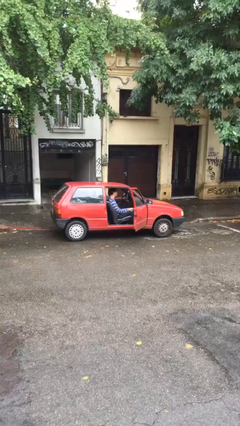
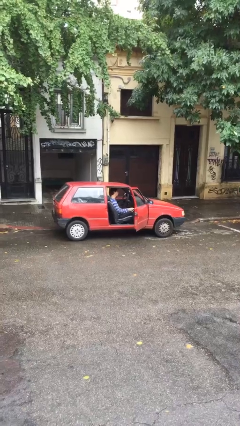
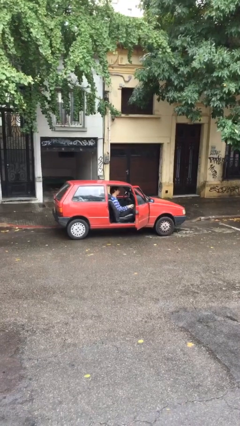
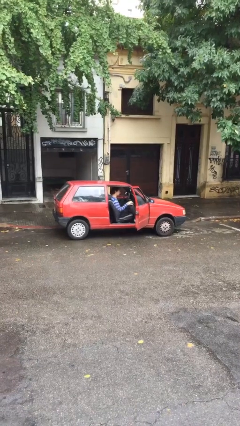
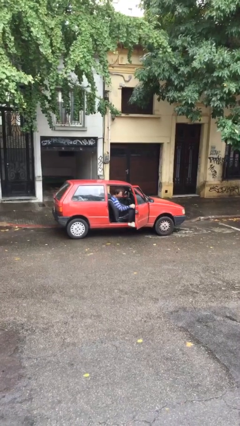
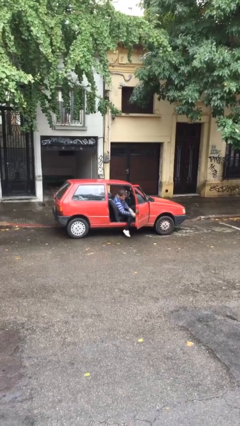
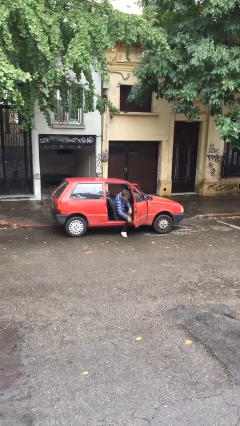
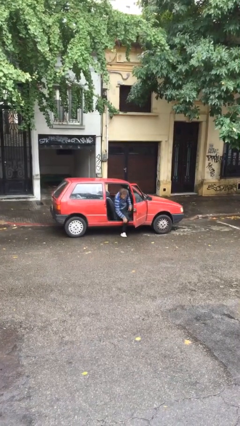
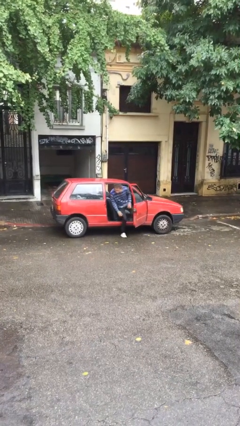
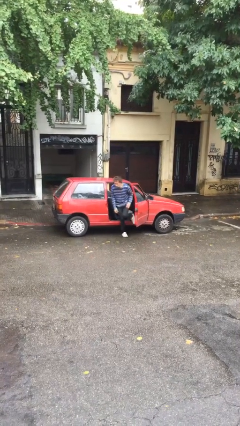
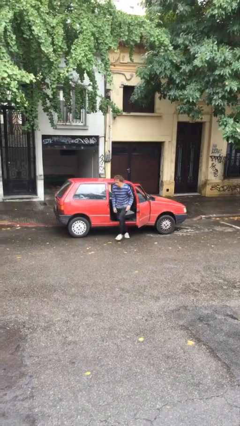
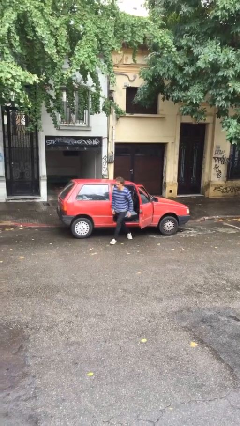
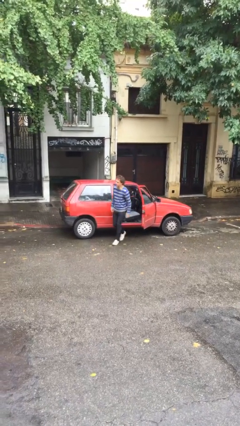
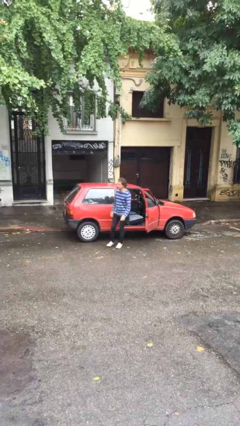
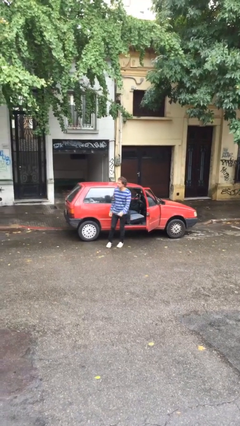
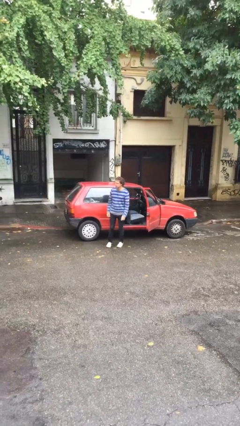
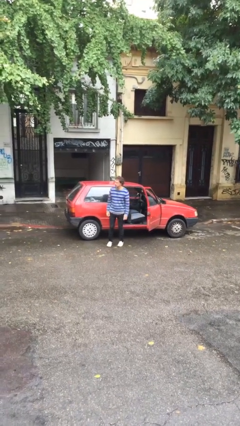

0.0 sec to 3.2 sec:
person exits car

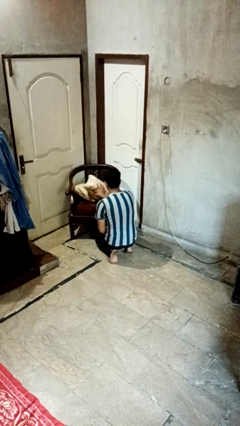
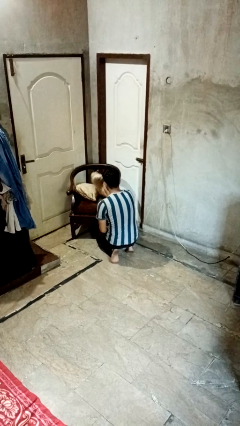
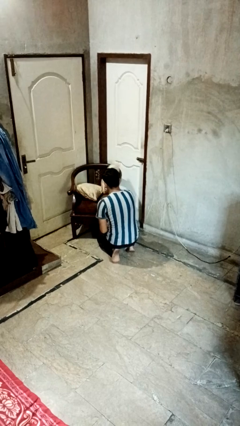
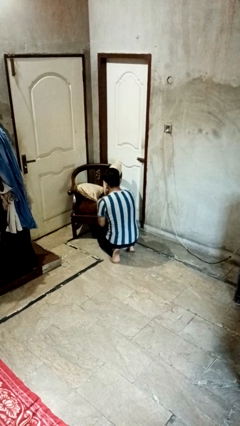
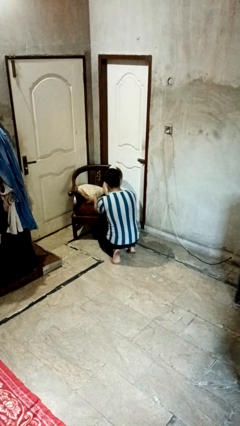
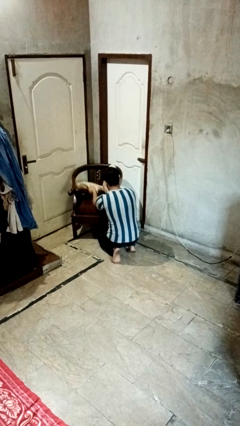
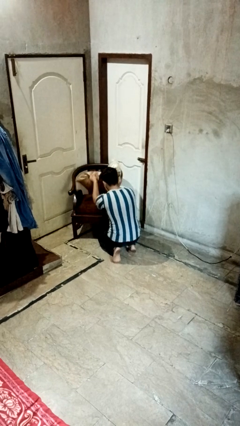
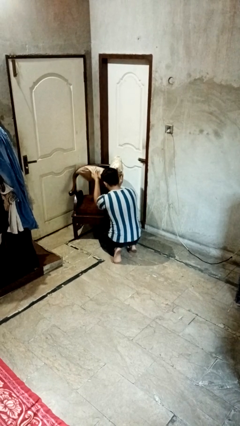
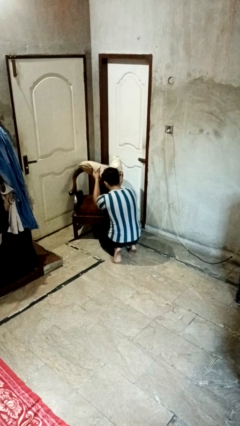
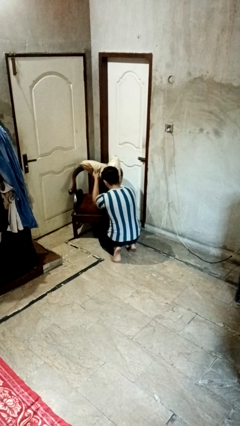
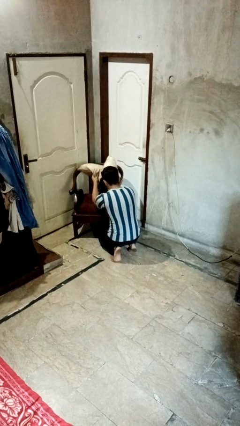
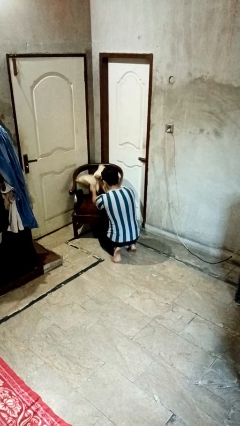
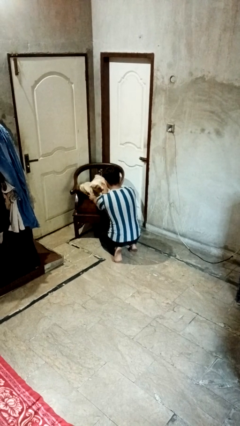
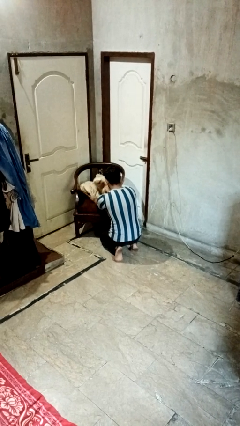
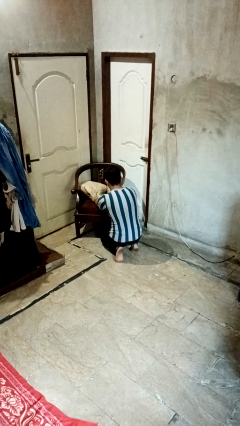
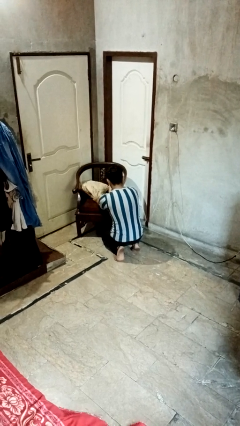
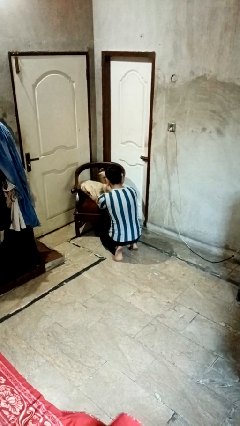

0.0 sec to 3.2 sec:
person searches in couch

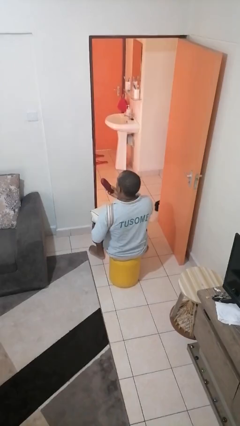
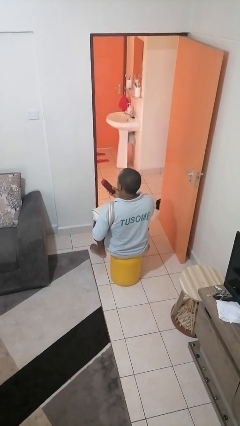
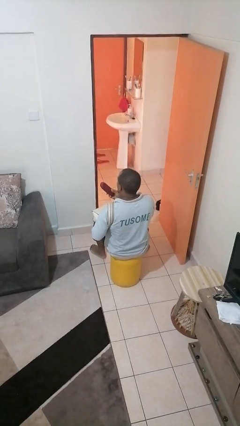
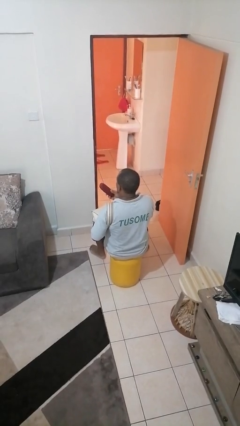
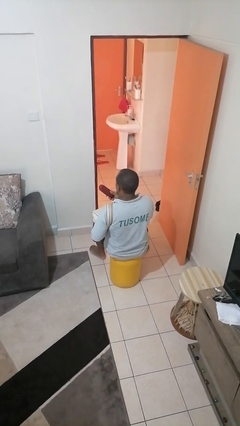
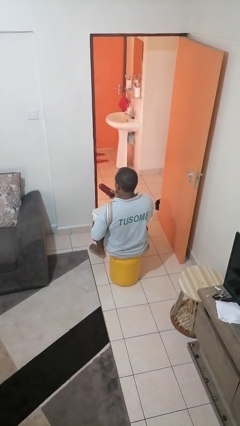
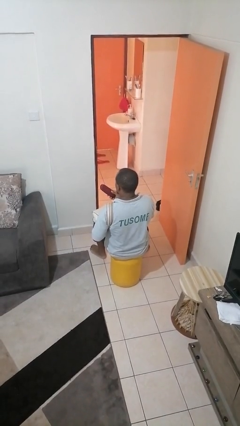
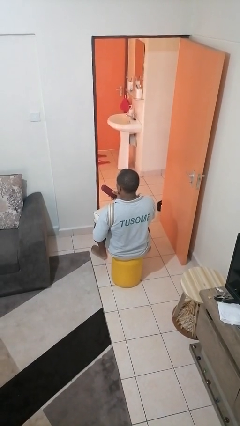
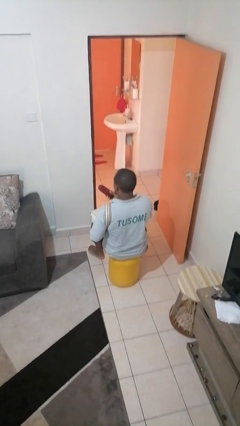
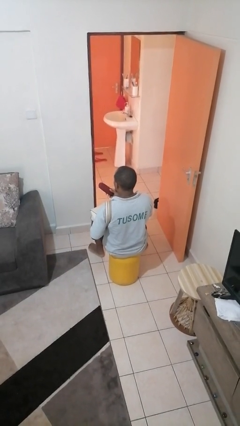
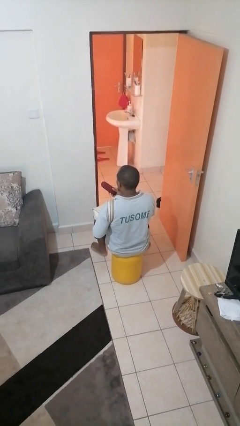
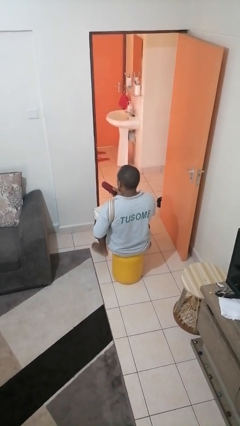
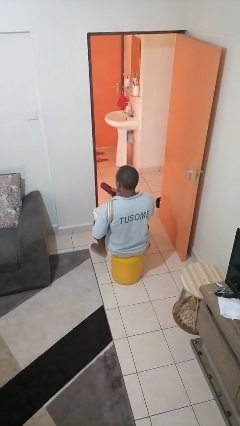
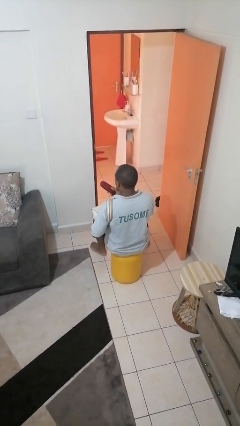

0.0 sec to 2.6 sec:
person takes object from purse

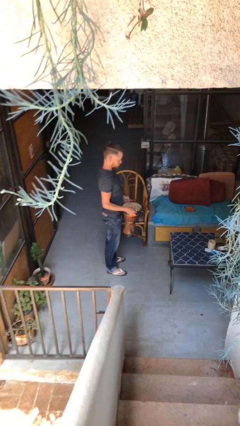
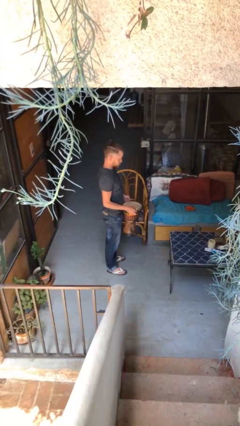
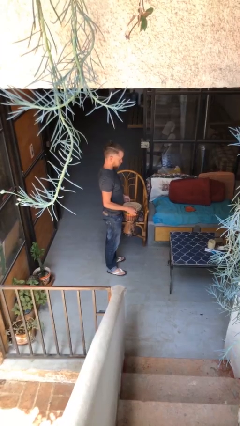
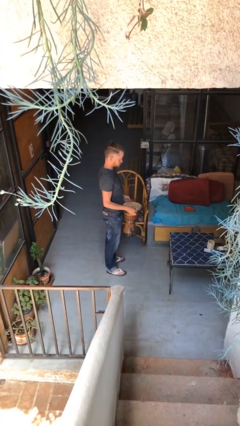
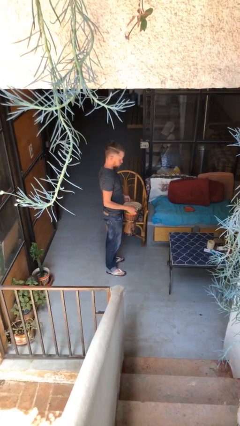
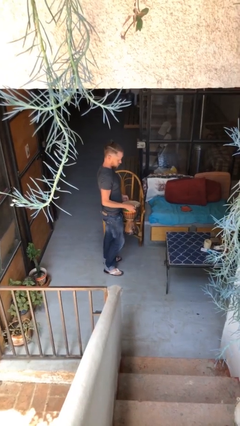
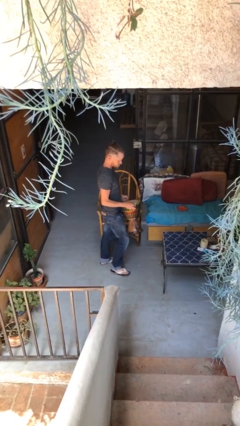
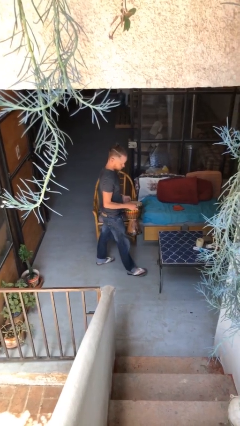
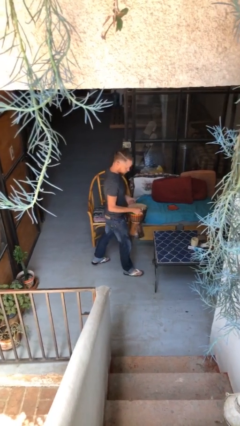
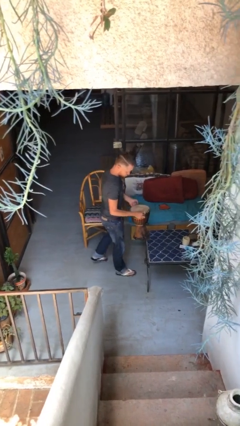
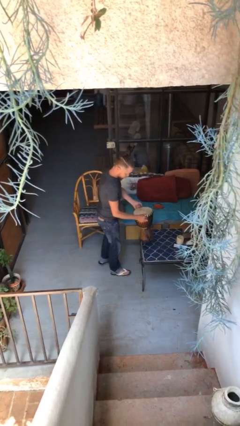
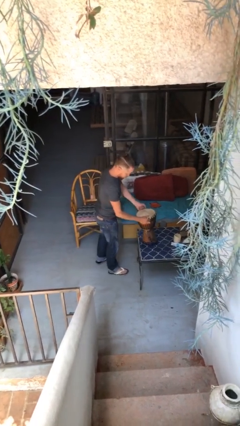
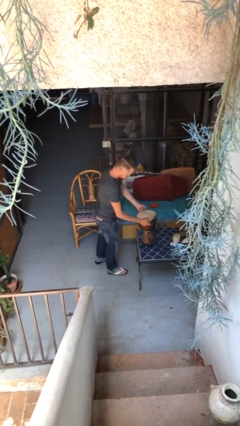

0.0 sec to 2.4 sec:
person puts down object on table

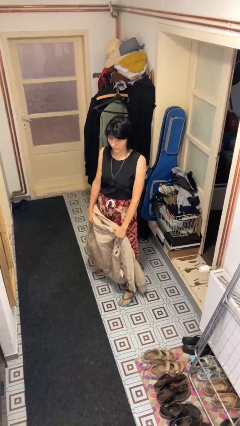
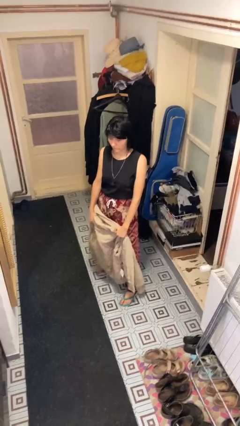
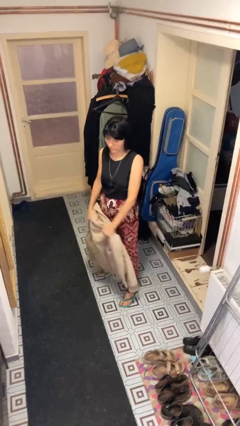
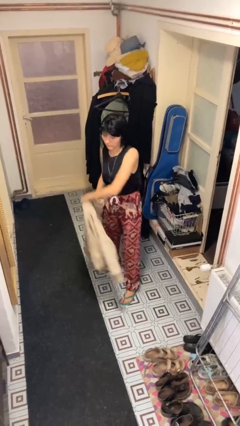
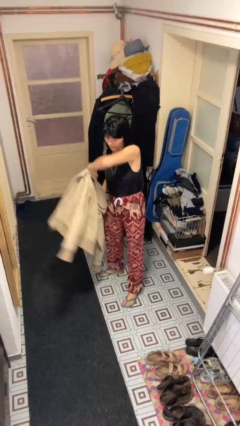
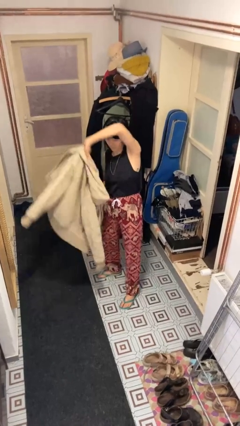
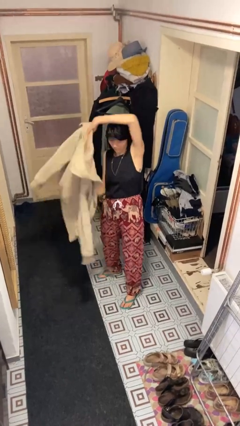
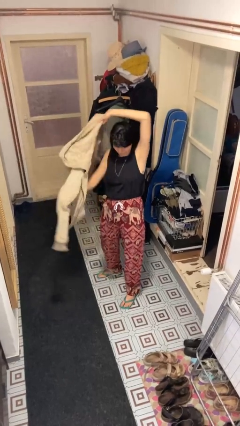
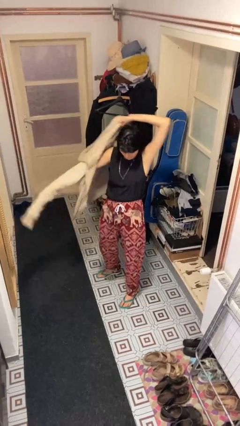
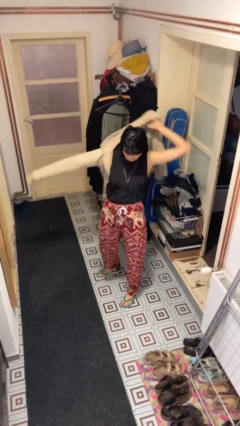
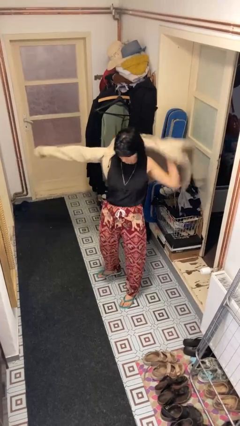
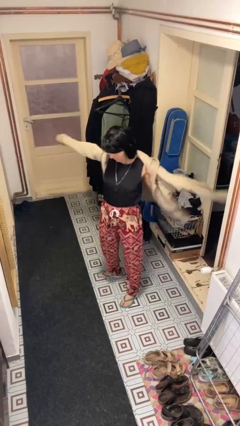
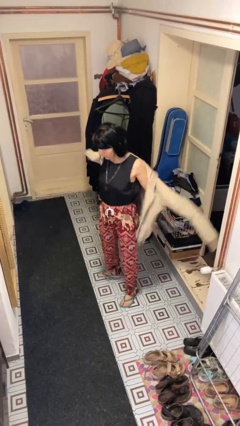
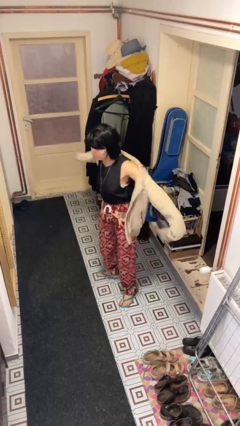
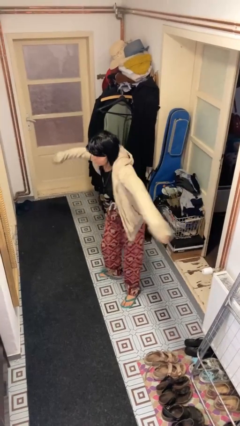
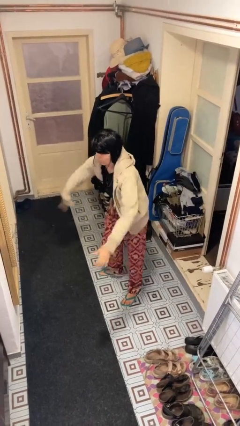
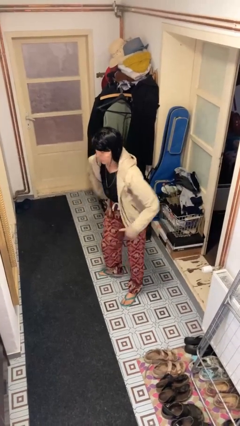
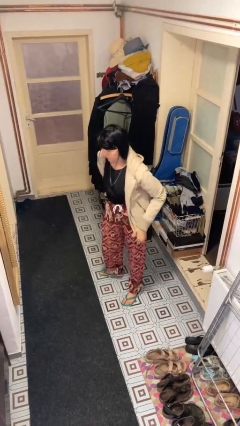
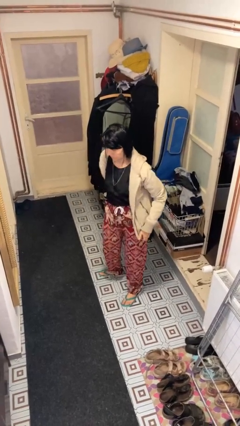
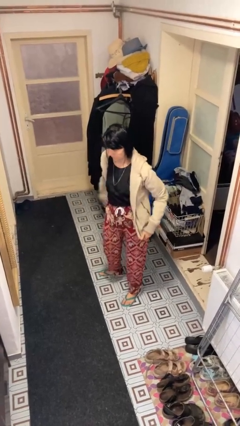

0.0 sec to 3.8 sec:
person puts on jacket

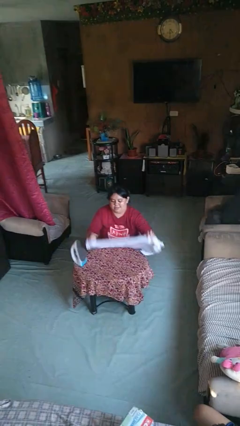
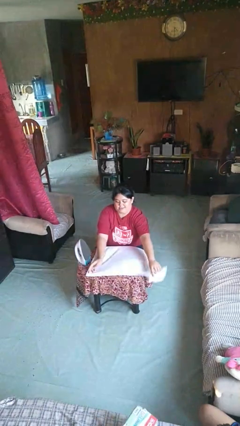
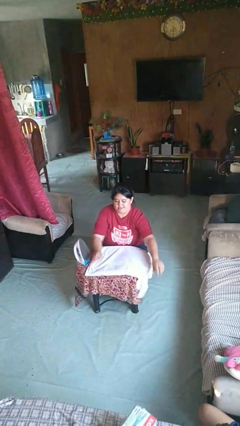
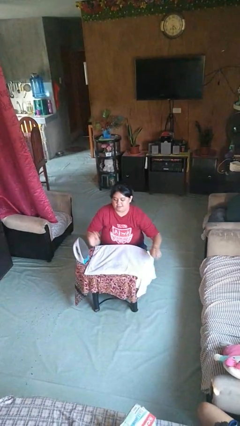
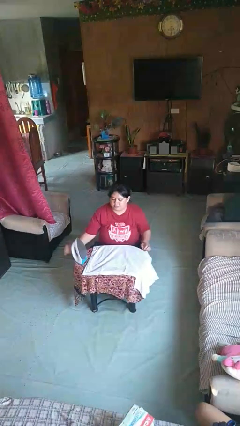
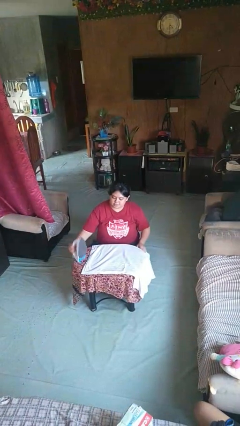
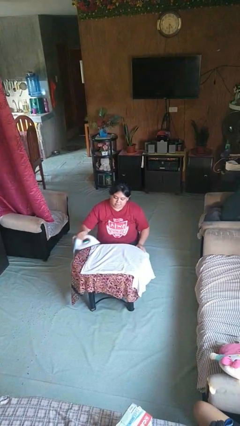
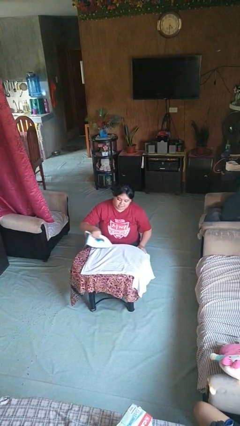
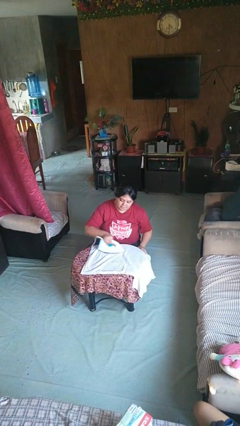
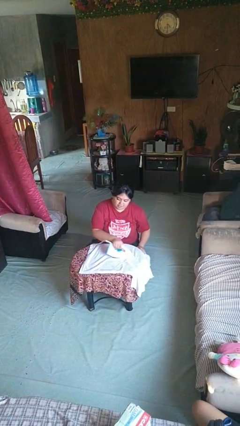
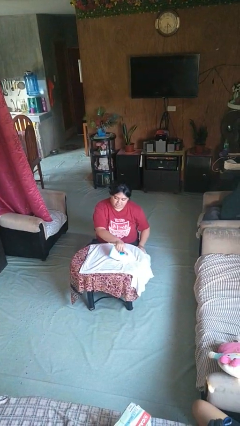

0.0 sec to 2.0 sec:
person irons clothes
